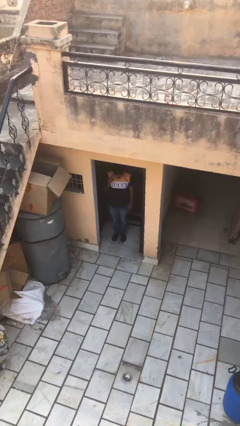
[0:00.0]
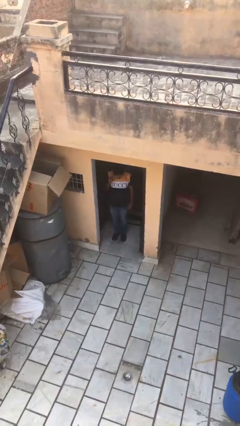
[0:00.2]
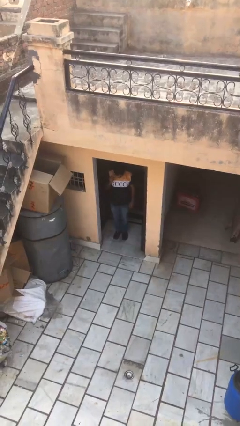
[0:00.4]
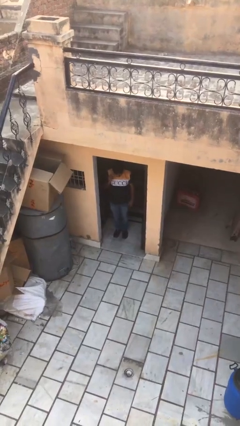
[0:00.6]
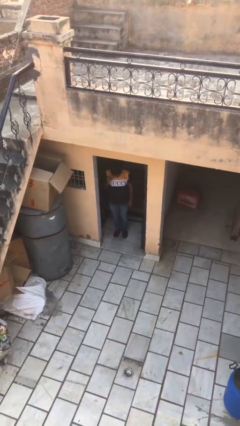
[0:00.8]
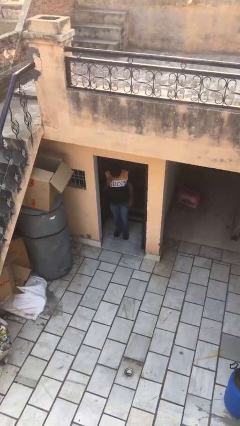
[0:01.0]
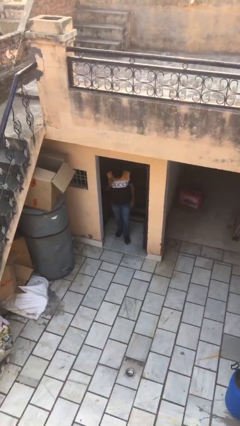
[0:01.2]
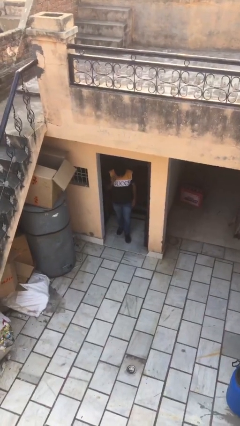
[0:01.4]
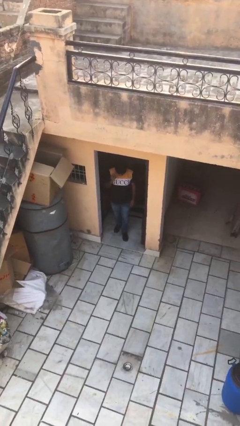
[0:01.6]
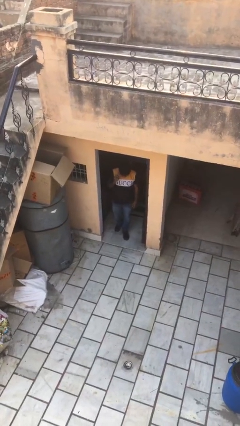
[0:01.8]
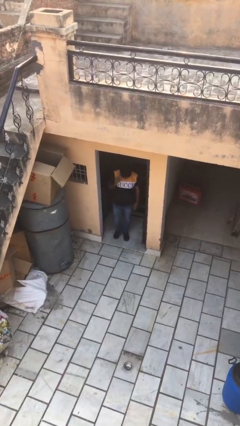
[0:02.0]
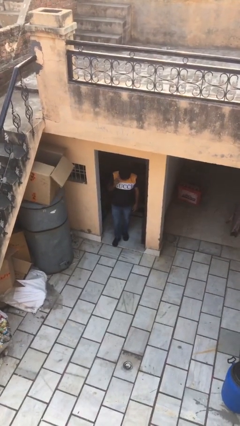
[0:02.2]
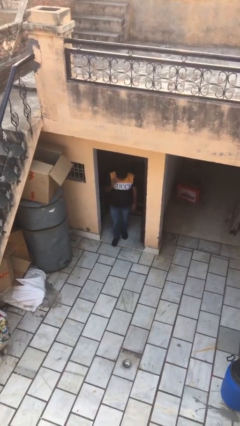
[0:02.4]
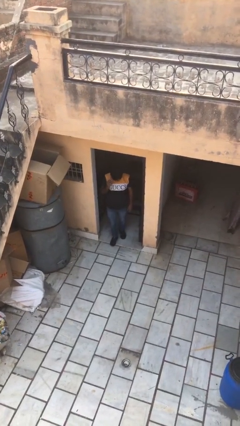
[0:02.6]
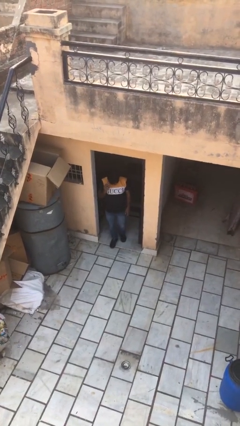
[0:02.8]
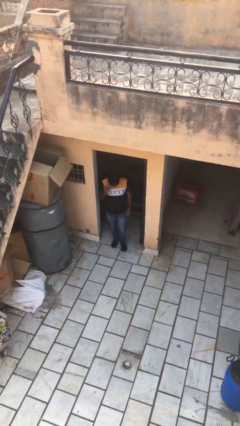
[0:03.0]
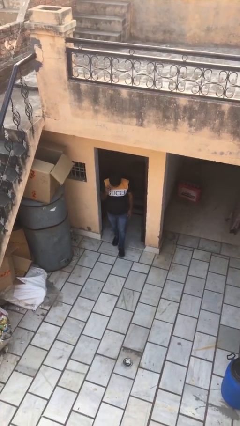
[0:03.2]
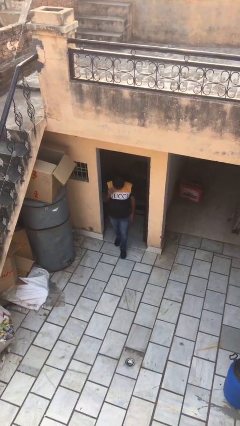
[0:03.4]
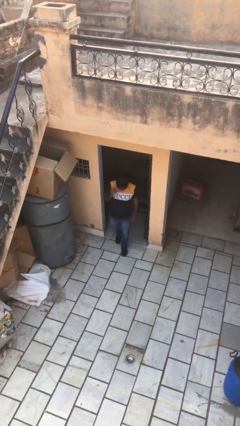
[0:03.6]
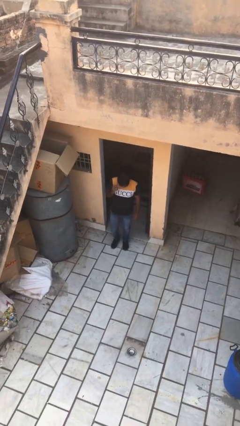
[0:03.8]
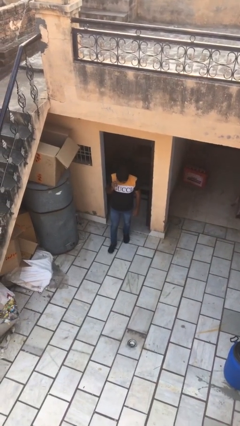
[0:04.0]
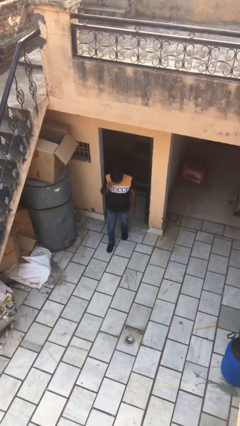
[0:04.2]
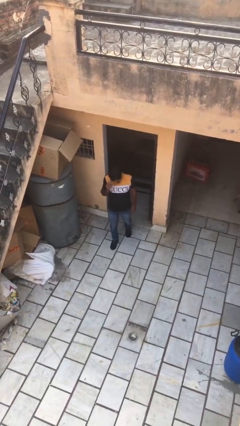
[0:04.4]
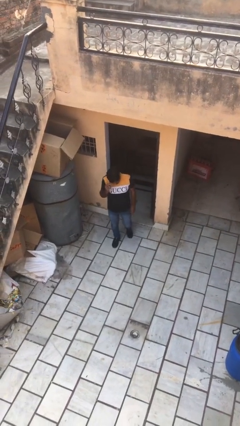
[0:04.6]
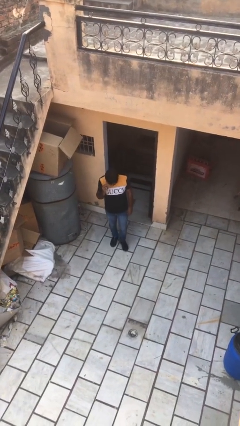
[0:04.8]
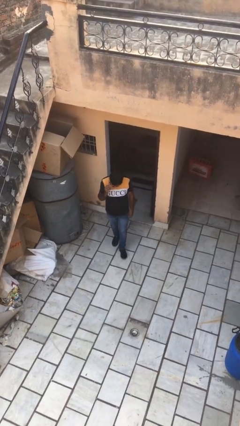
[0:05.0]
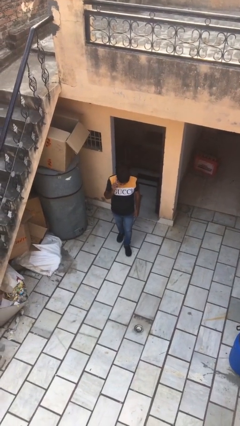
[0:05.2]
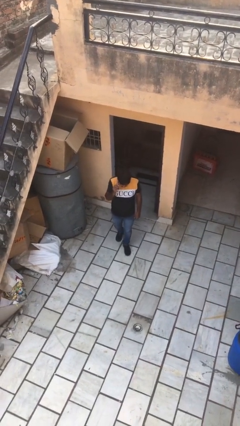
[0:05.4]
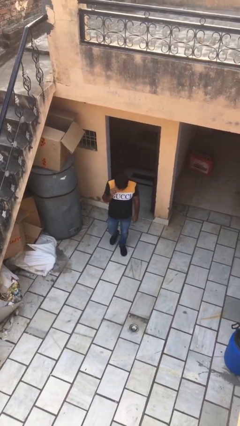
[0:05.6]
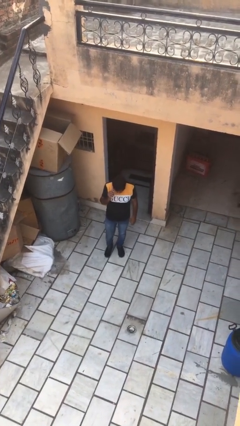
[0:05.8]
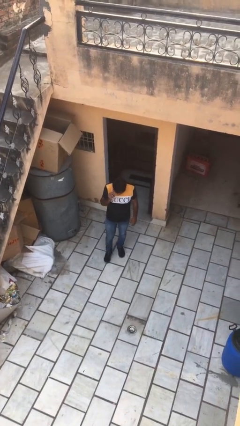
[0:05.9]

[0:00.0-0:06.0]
person enters scene through structure

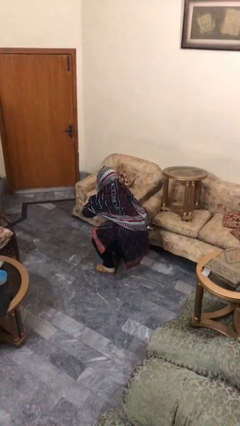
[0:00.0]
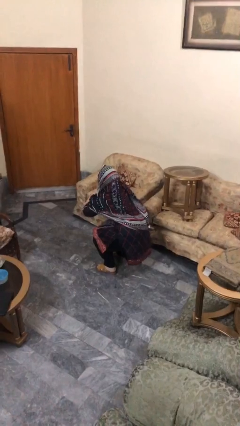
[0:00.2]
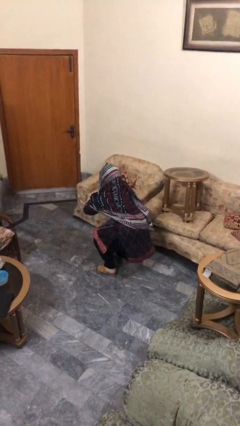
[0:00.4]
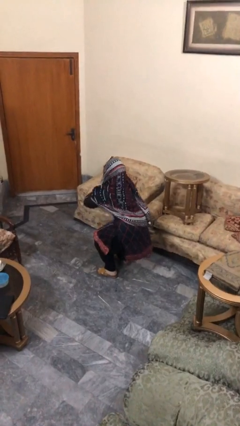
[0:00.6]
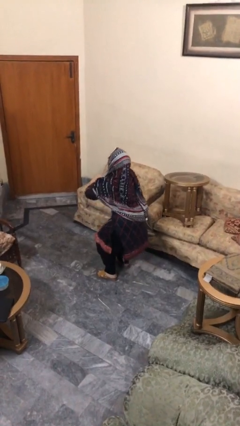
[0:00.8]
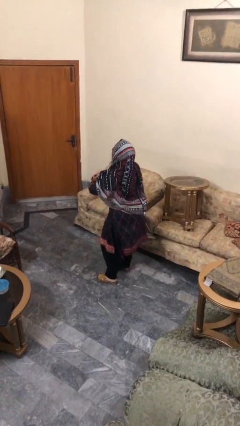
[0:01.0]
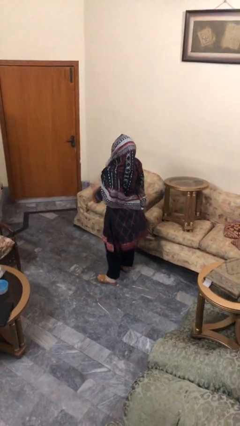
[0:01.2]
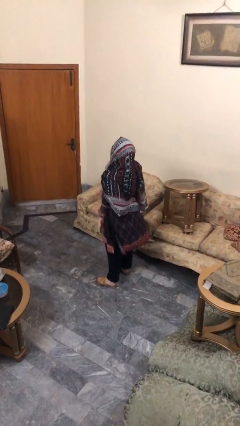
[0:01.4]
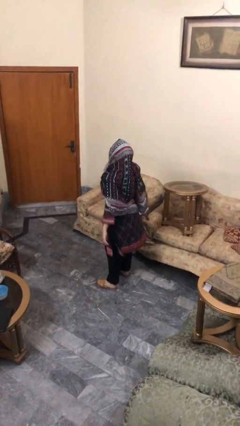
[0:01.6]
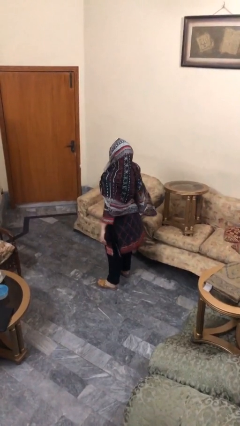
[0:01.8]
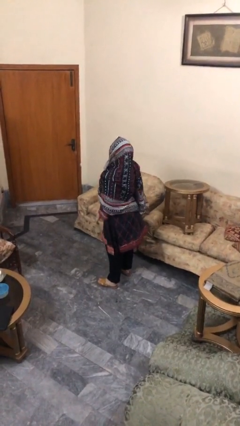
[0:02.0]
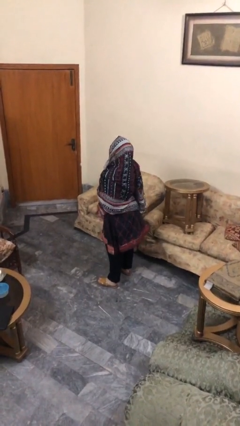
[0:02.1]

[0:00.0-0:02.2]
person stands up

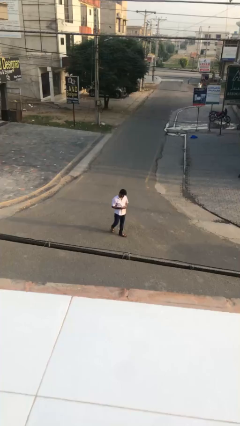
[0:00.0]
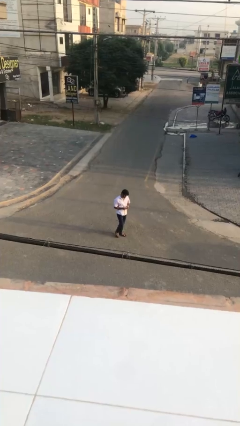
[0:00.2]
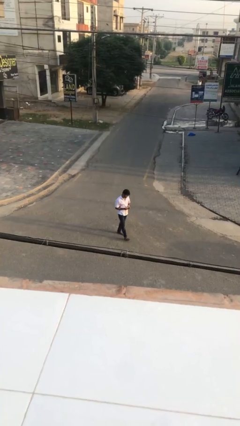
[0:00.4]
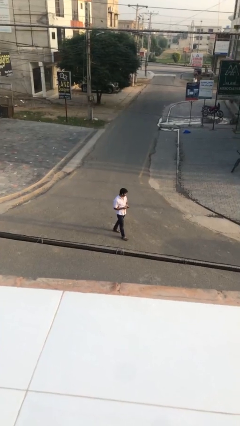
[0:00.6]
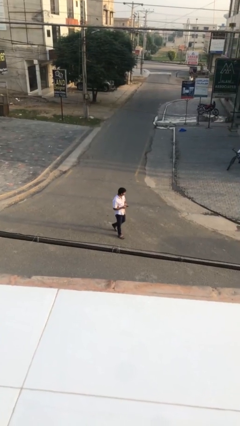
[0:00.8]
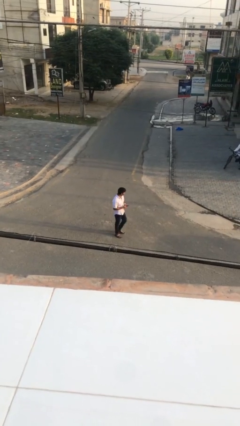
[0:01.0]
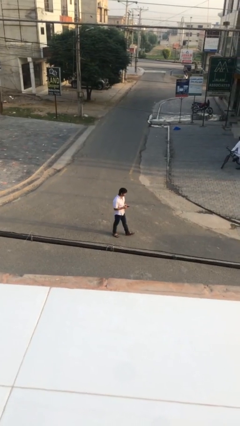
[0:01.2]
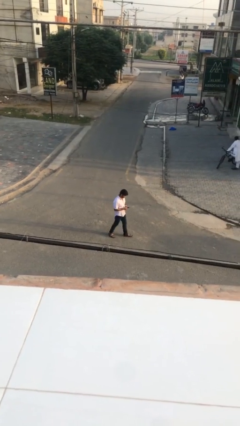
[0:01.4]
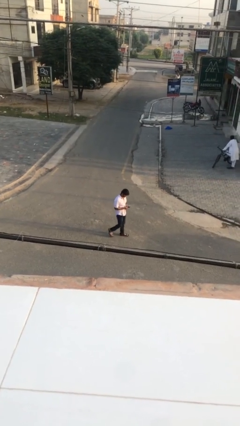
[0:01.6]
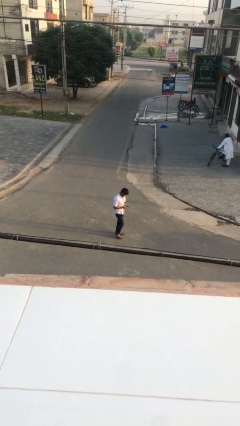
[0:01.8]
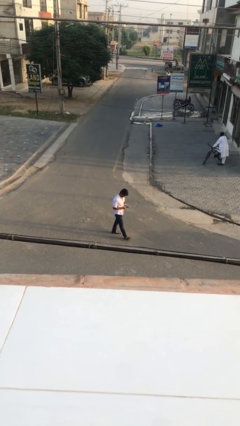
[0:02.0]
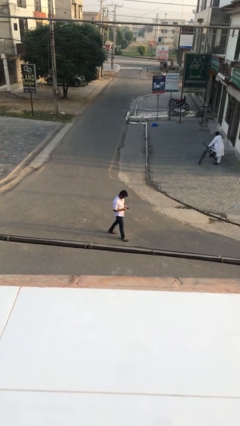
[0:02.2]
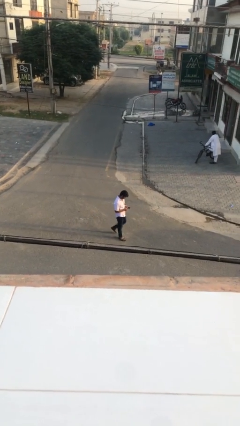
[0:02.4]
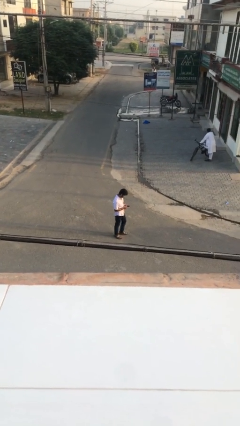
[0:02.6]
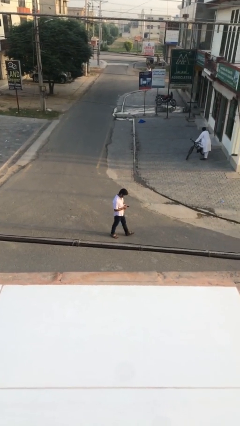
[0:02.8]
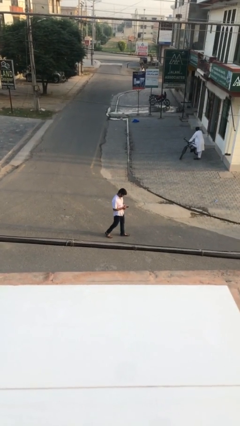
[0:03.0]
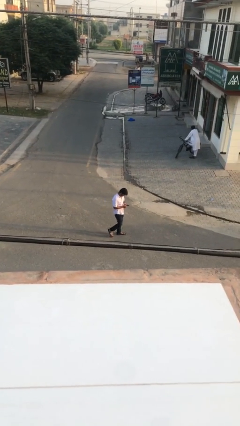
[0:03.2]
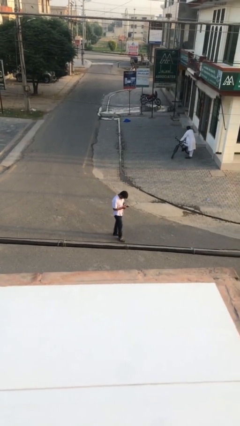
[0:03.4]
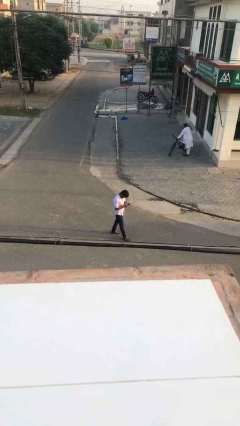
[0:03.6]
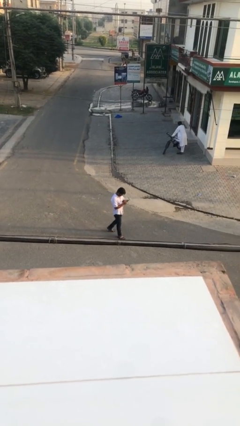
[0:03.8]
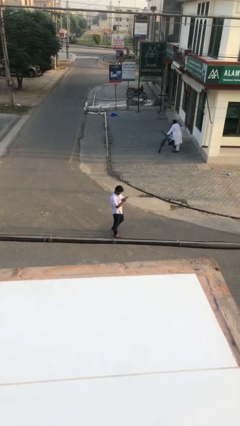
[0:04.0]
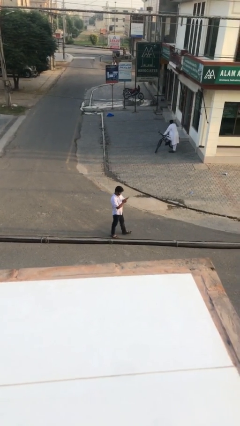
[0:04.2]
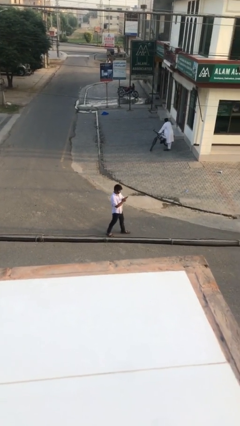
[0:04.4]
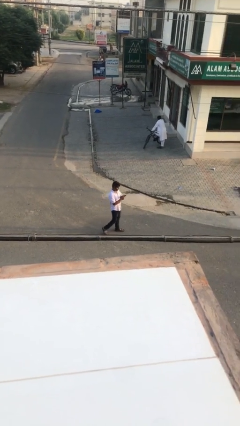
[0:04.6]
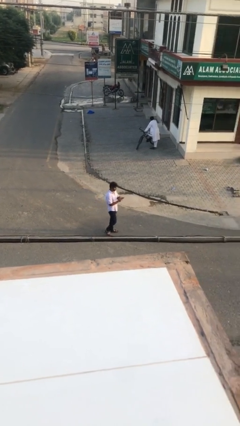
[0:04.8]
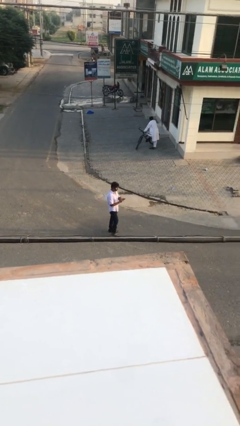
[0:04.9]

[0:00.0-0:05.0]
person texts on phone

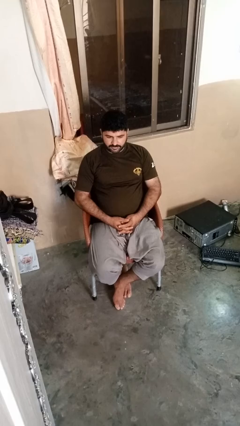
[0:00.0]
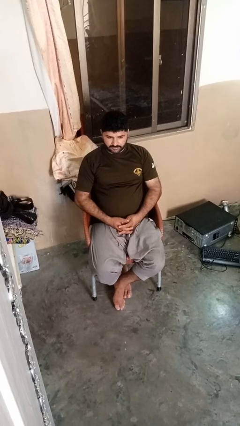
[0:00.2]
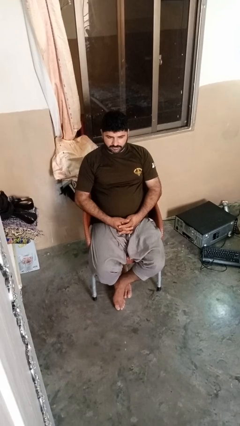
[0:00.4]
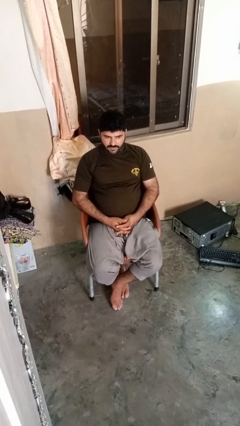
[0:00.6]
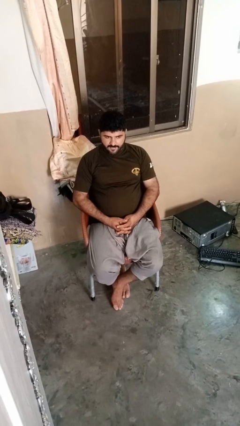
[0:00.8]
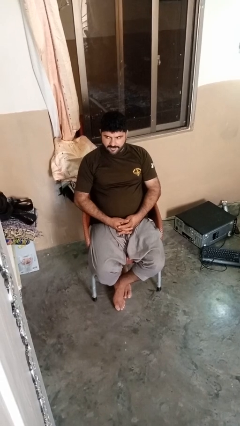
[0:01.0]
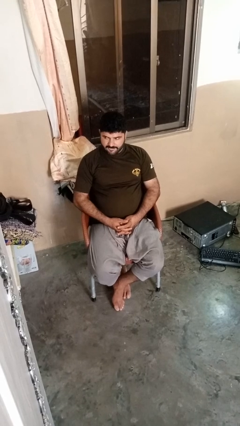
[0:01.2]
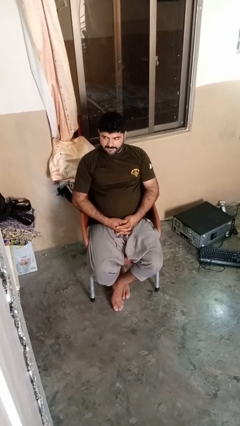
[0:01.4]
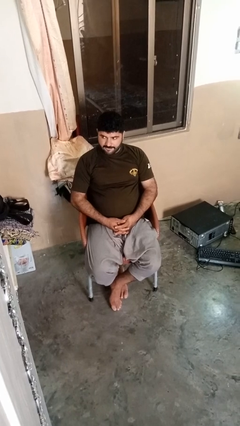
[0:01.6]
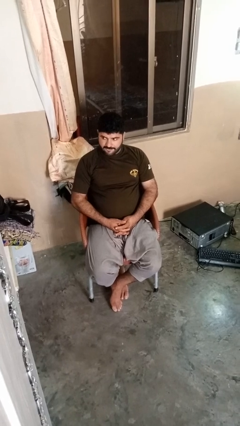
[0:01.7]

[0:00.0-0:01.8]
person sticks out tongue

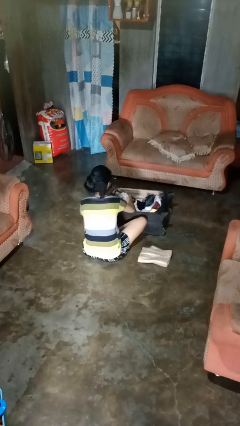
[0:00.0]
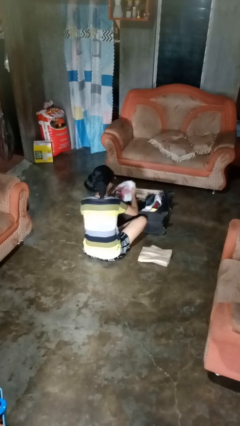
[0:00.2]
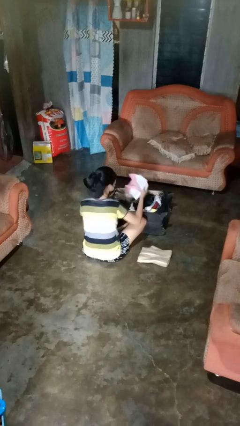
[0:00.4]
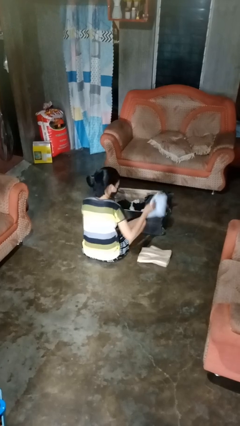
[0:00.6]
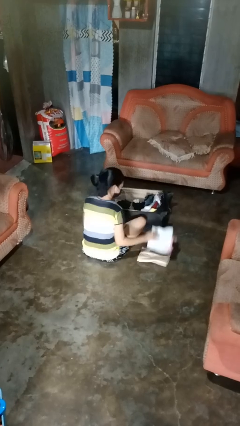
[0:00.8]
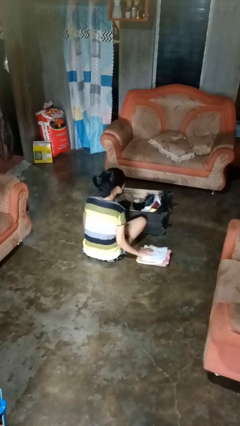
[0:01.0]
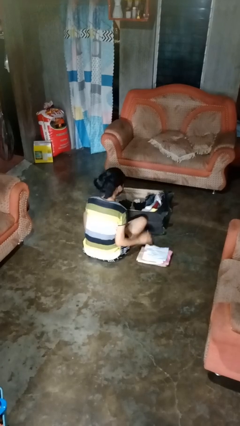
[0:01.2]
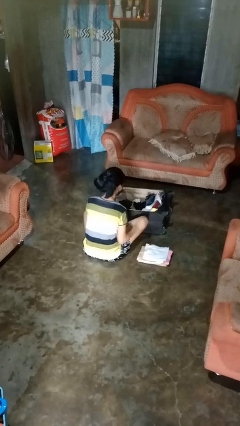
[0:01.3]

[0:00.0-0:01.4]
person unloads clothes from suitcase

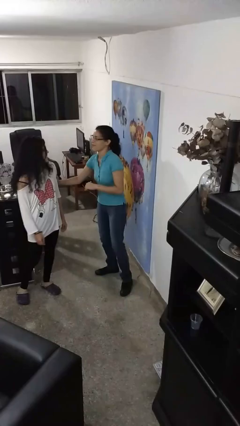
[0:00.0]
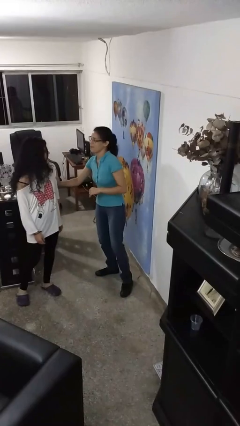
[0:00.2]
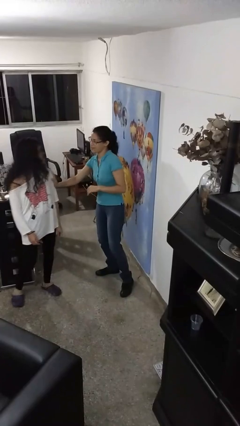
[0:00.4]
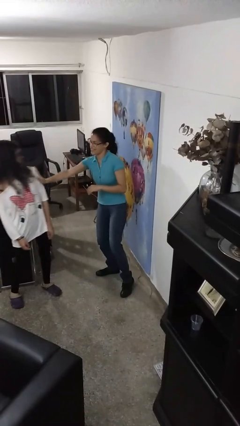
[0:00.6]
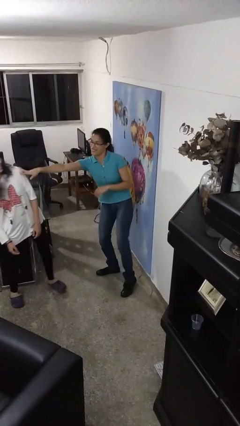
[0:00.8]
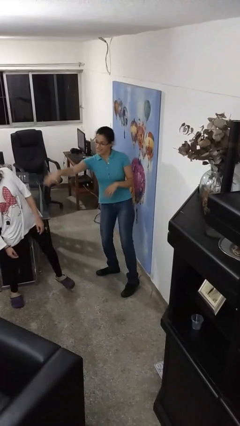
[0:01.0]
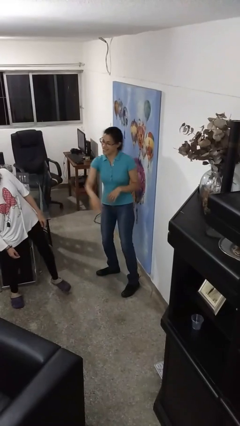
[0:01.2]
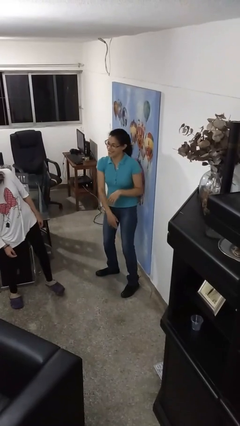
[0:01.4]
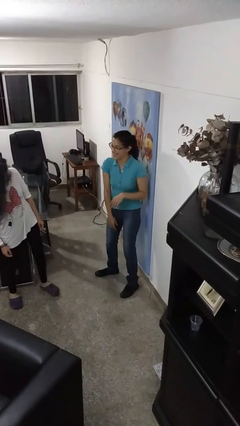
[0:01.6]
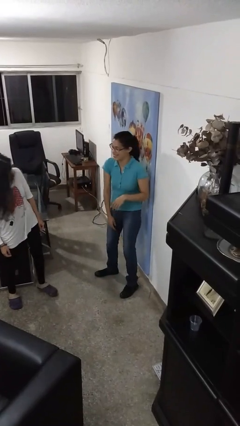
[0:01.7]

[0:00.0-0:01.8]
person shoves person
